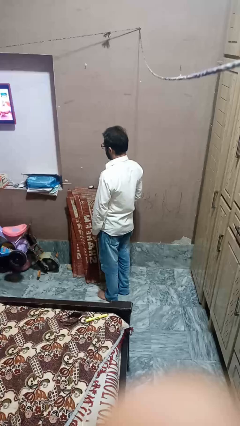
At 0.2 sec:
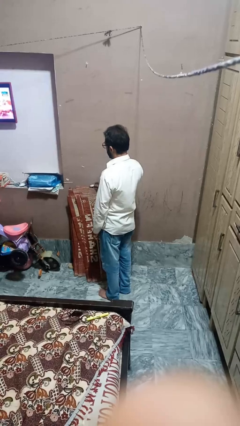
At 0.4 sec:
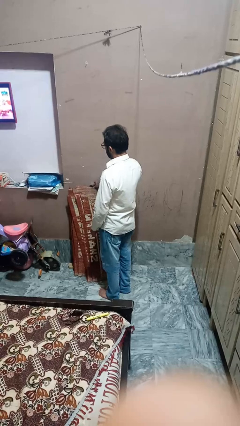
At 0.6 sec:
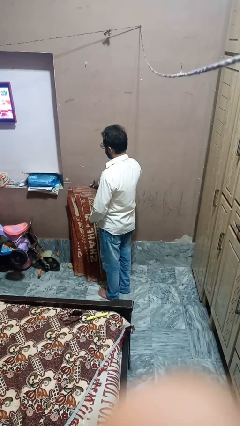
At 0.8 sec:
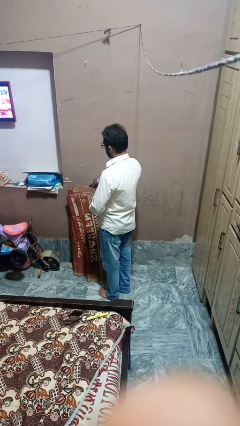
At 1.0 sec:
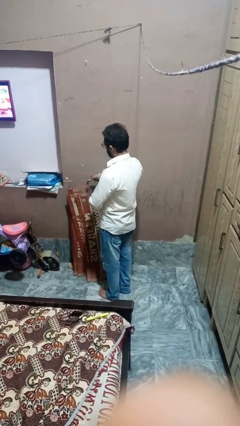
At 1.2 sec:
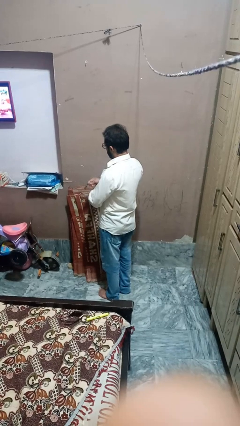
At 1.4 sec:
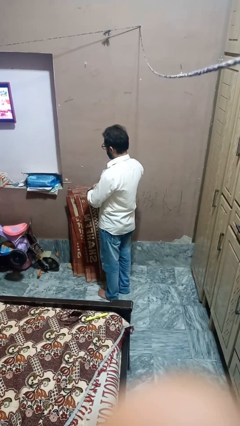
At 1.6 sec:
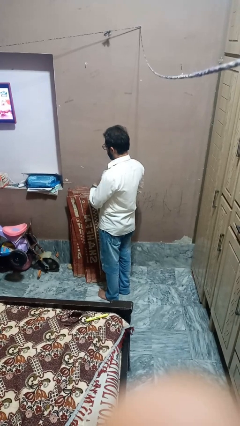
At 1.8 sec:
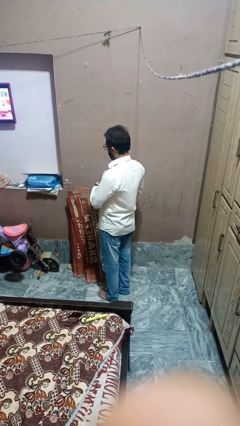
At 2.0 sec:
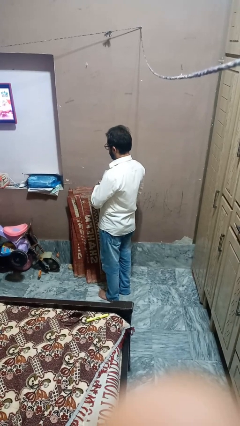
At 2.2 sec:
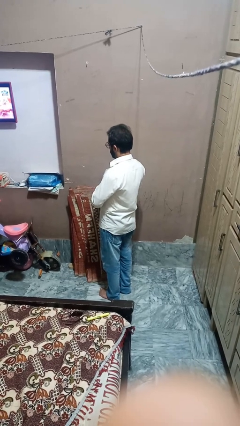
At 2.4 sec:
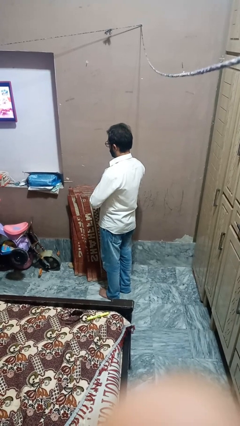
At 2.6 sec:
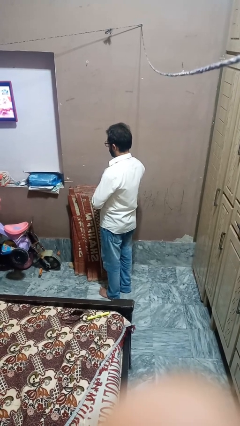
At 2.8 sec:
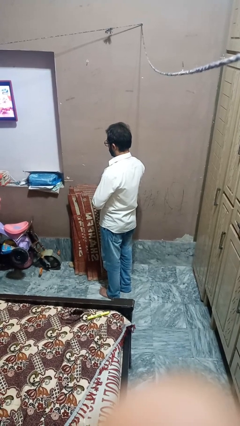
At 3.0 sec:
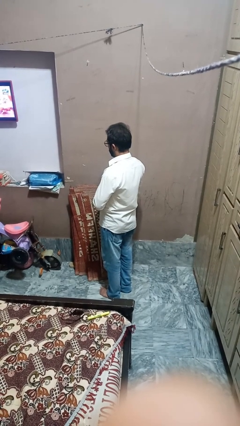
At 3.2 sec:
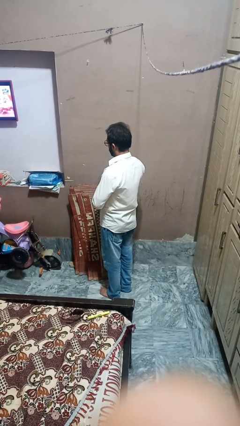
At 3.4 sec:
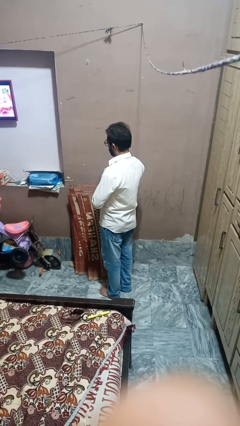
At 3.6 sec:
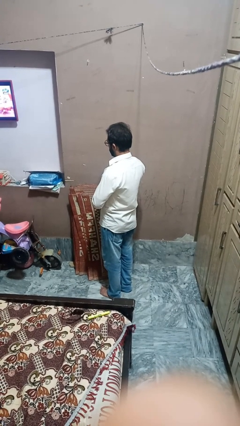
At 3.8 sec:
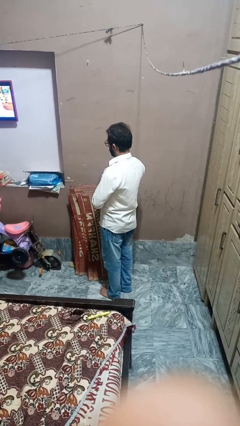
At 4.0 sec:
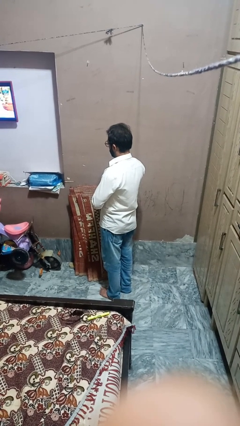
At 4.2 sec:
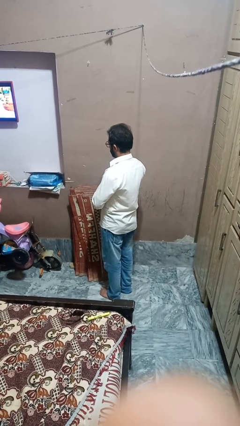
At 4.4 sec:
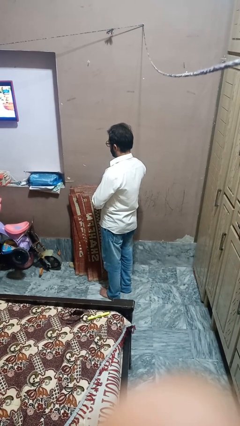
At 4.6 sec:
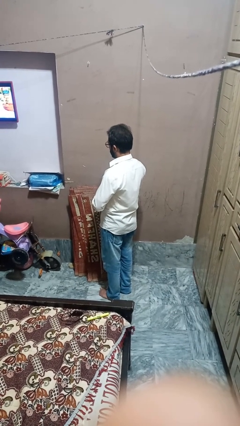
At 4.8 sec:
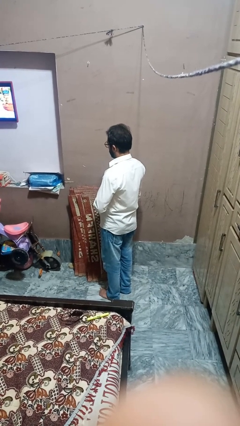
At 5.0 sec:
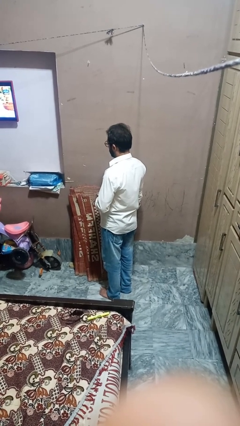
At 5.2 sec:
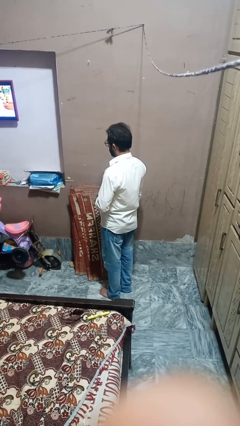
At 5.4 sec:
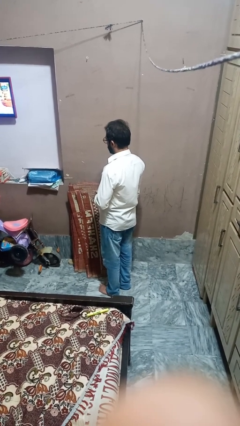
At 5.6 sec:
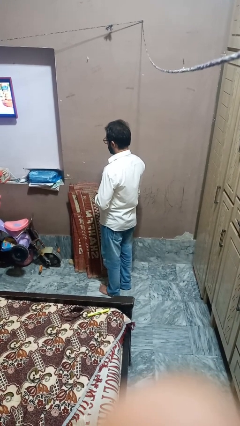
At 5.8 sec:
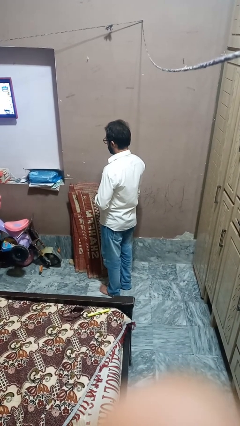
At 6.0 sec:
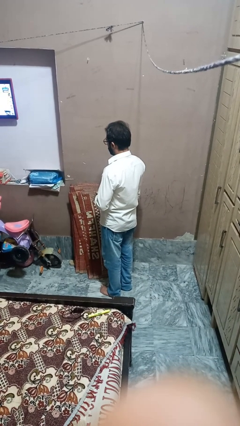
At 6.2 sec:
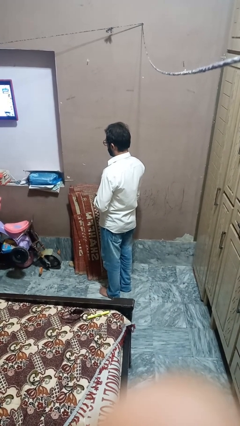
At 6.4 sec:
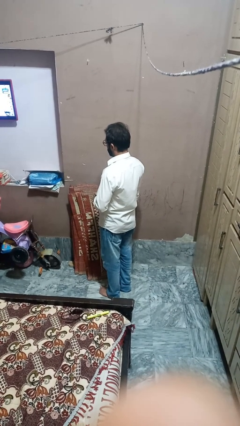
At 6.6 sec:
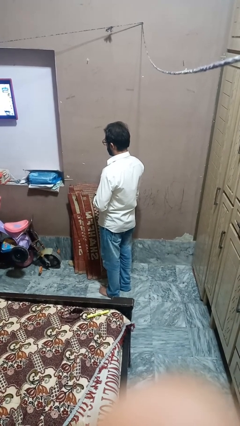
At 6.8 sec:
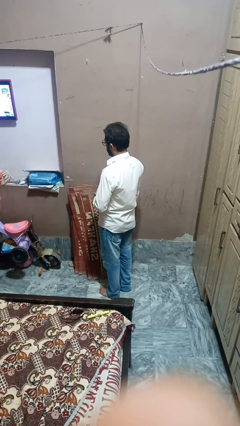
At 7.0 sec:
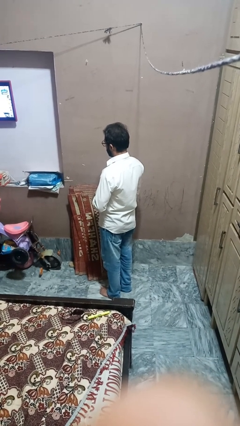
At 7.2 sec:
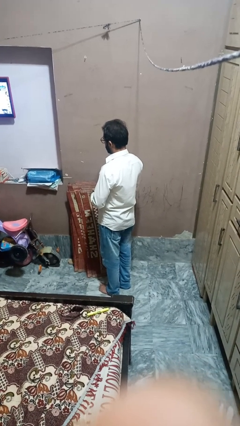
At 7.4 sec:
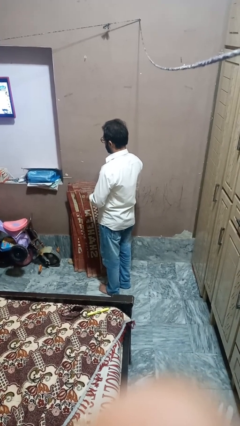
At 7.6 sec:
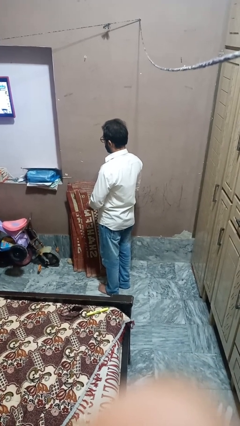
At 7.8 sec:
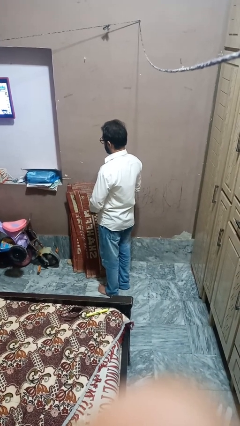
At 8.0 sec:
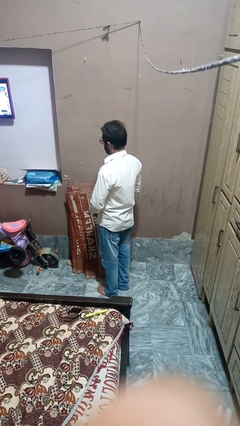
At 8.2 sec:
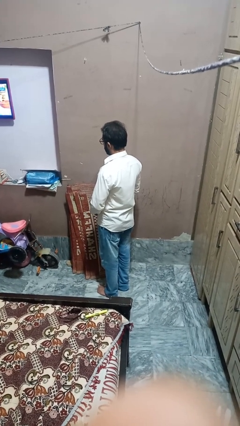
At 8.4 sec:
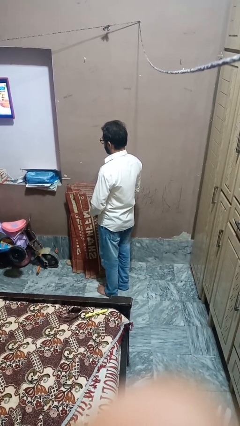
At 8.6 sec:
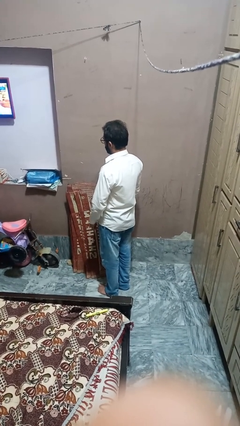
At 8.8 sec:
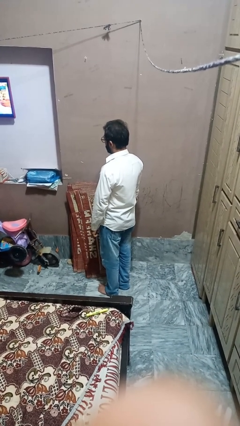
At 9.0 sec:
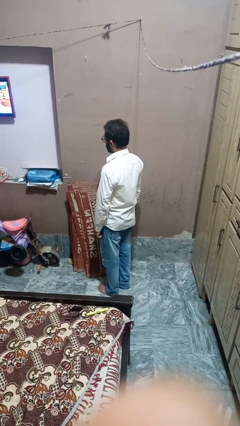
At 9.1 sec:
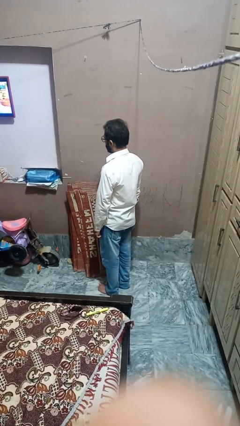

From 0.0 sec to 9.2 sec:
person puts on wristwatch

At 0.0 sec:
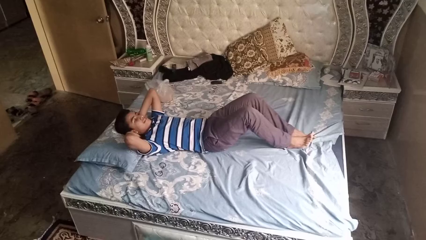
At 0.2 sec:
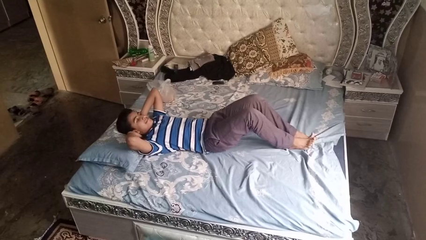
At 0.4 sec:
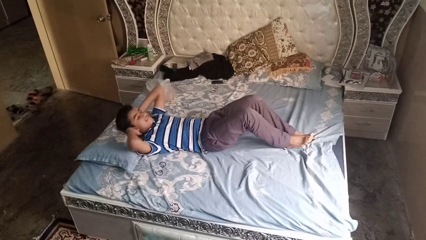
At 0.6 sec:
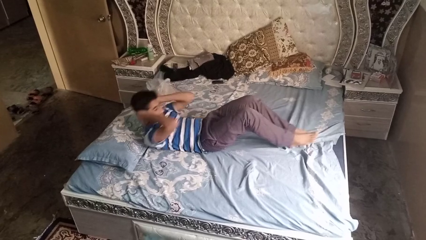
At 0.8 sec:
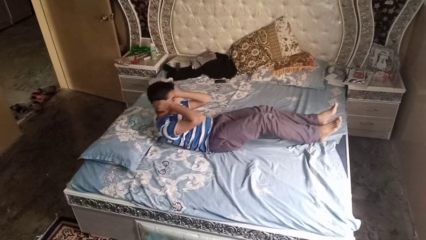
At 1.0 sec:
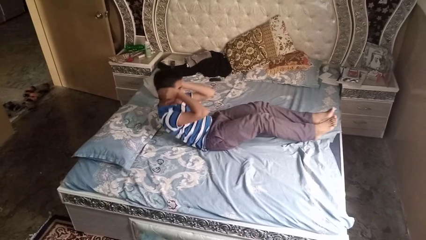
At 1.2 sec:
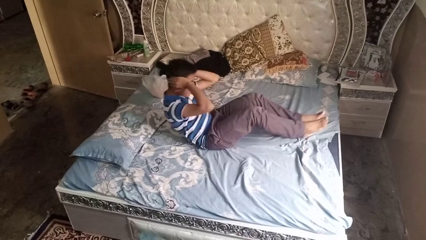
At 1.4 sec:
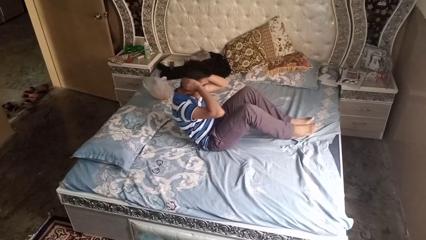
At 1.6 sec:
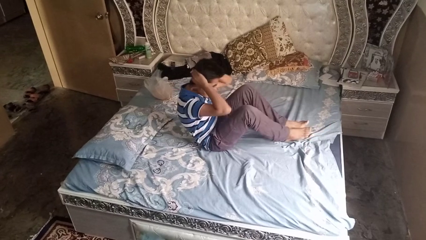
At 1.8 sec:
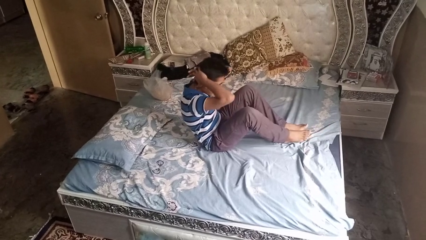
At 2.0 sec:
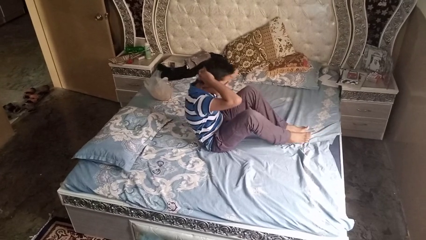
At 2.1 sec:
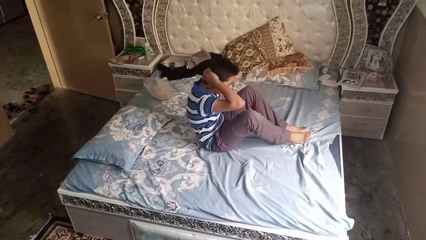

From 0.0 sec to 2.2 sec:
person exercises with situp

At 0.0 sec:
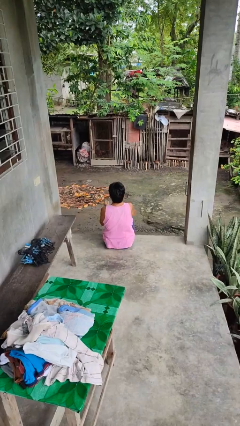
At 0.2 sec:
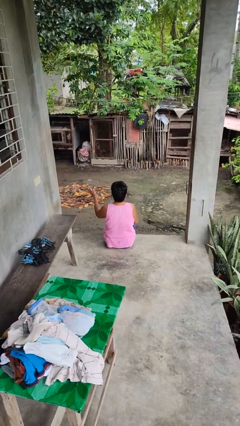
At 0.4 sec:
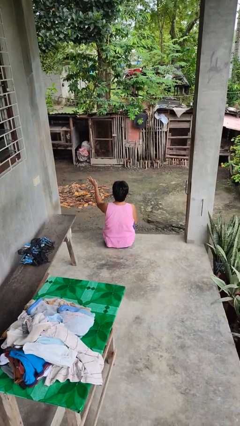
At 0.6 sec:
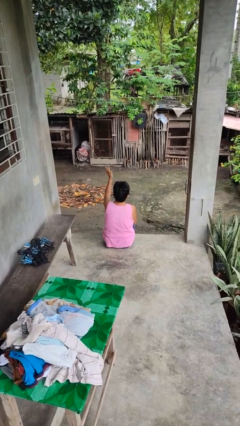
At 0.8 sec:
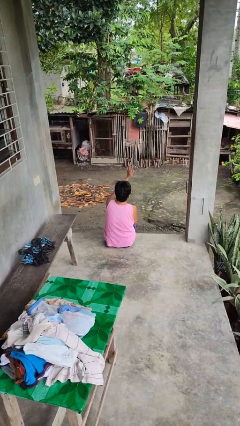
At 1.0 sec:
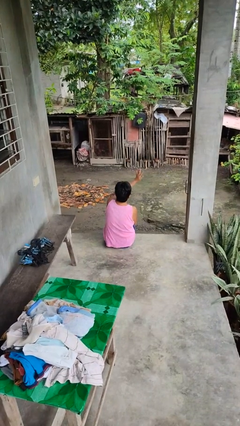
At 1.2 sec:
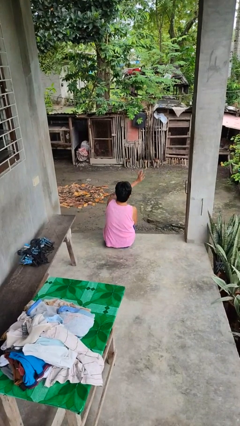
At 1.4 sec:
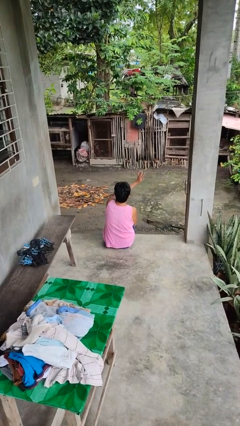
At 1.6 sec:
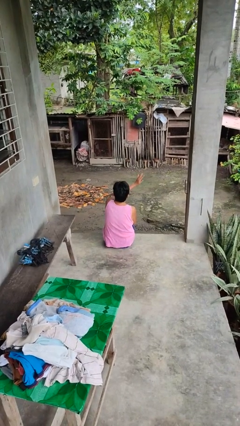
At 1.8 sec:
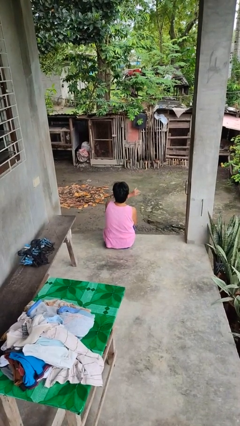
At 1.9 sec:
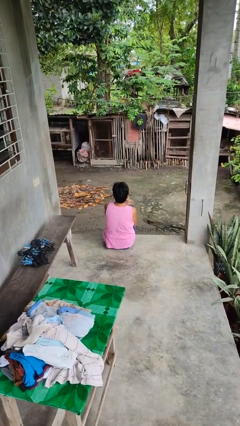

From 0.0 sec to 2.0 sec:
person gestures swipe right

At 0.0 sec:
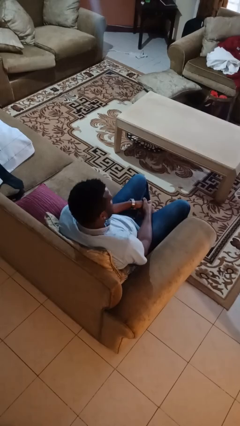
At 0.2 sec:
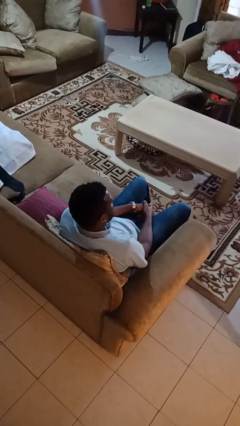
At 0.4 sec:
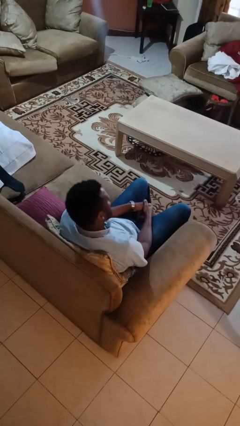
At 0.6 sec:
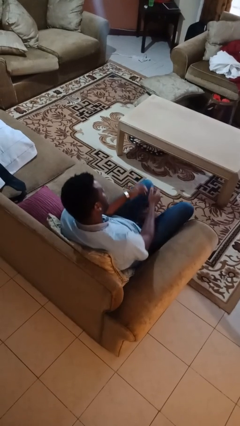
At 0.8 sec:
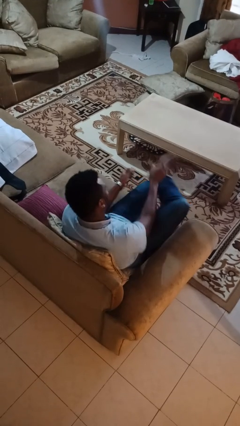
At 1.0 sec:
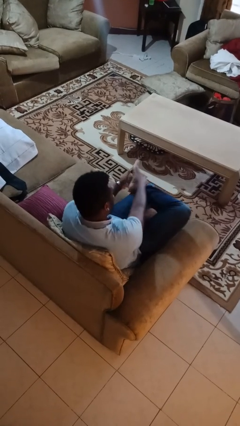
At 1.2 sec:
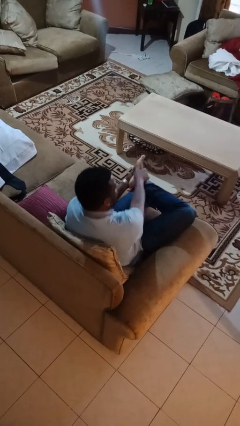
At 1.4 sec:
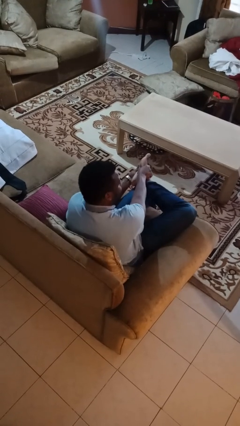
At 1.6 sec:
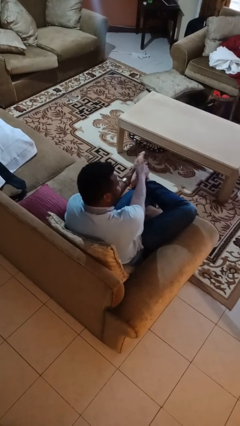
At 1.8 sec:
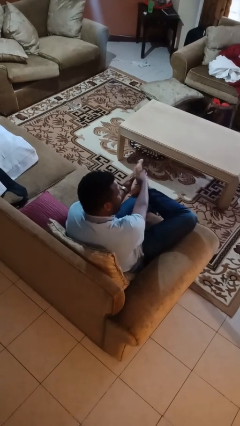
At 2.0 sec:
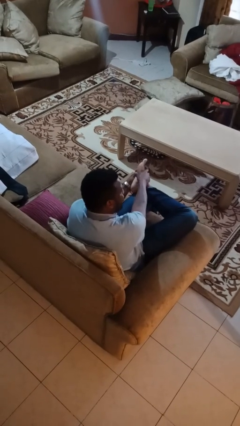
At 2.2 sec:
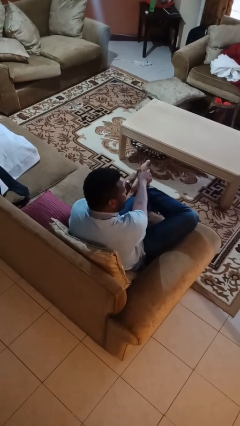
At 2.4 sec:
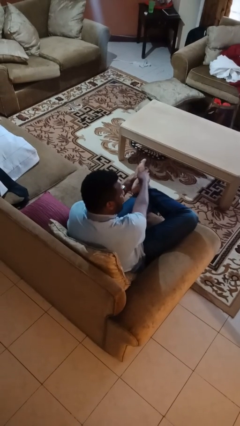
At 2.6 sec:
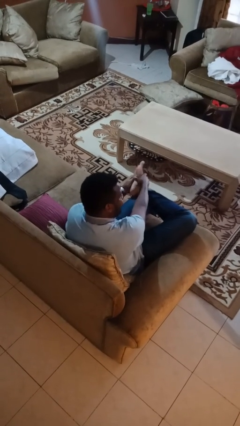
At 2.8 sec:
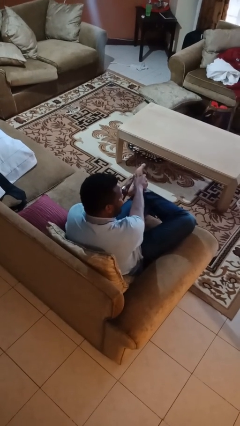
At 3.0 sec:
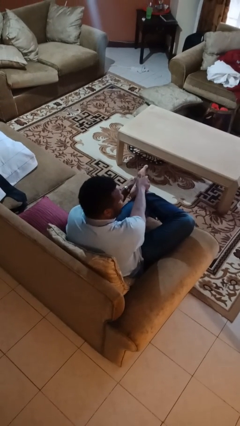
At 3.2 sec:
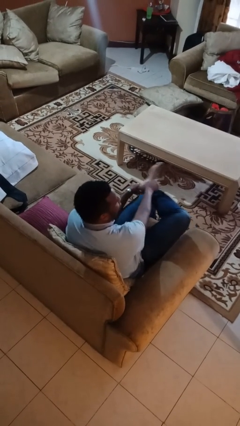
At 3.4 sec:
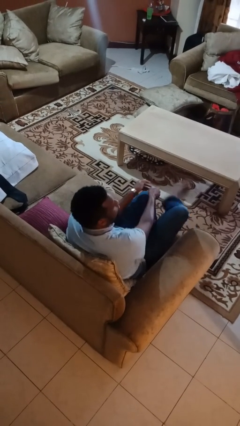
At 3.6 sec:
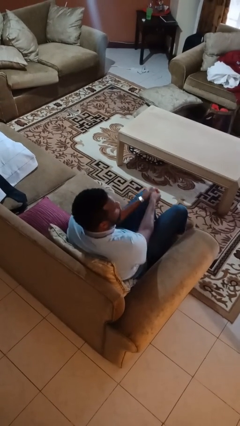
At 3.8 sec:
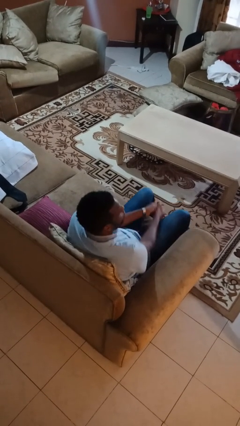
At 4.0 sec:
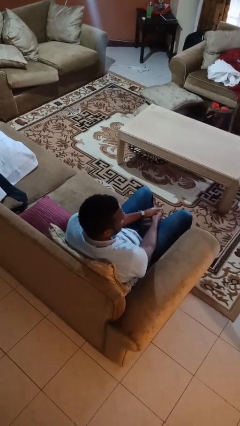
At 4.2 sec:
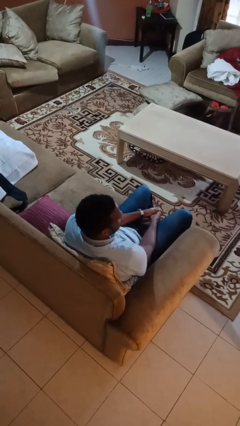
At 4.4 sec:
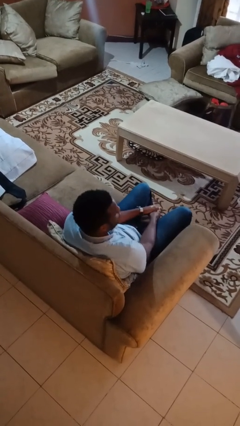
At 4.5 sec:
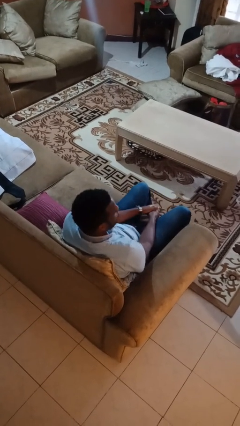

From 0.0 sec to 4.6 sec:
person rubs foot
